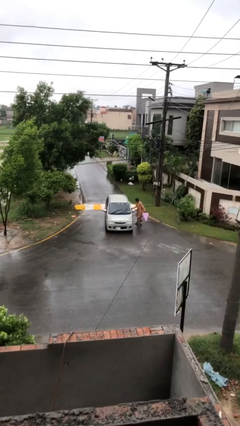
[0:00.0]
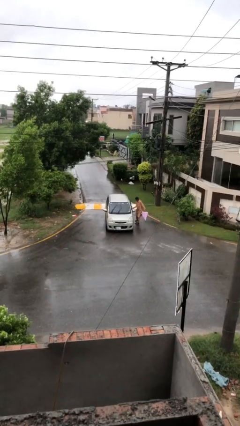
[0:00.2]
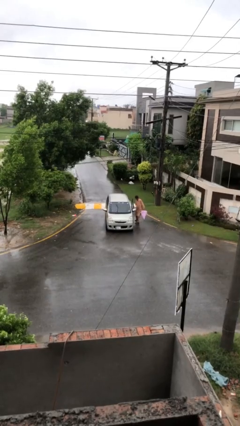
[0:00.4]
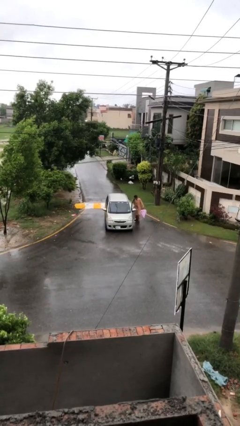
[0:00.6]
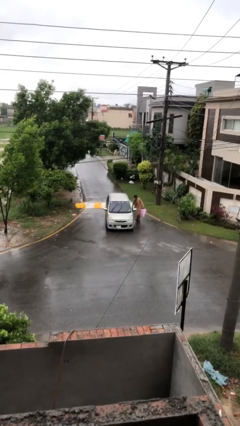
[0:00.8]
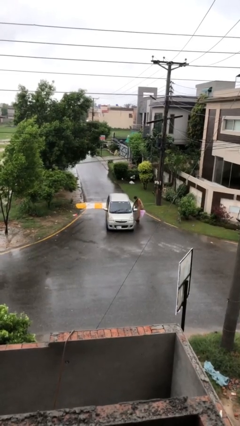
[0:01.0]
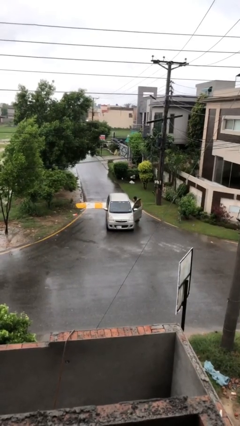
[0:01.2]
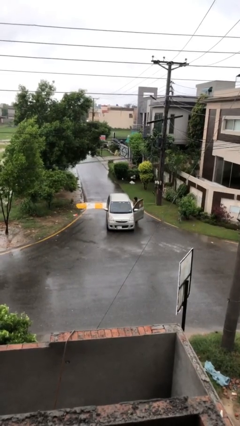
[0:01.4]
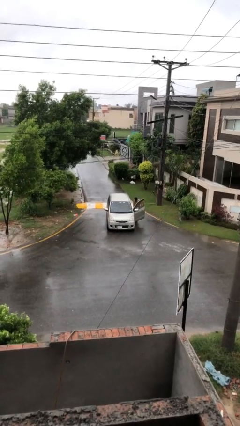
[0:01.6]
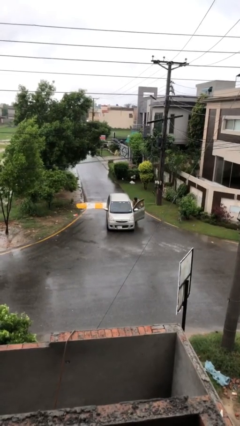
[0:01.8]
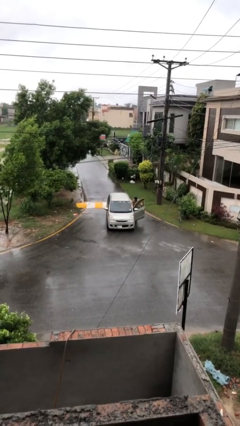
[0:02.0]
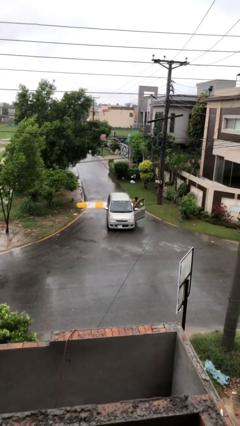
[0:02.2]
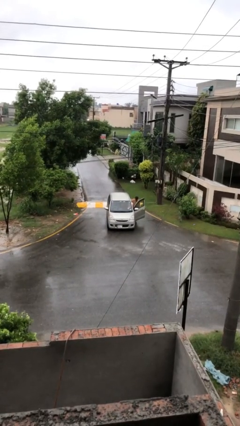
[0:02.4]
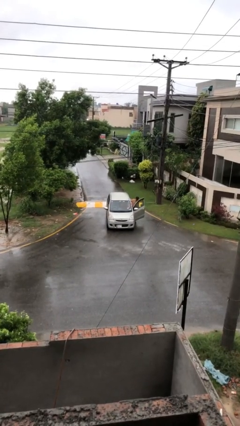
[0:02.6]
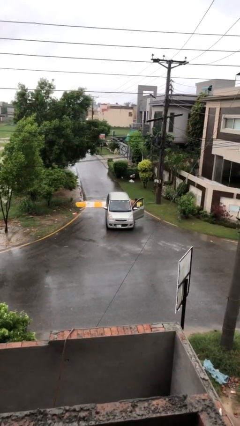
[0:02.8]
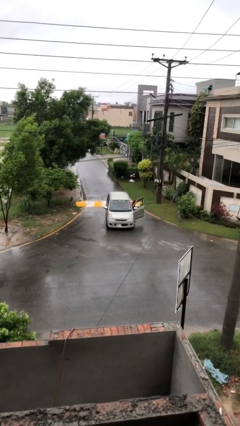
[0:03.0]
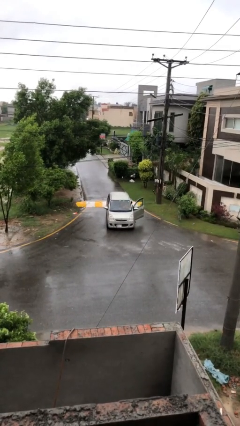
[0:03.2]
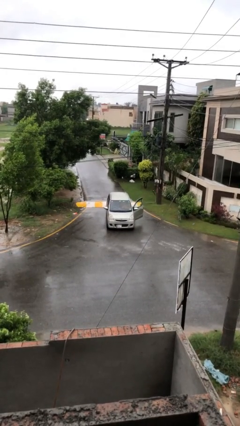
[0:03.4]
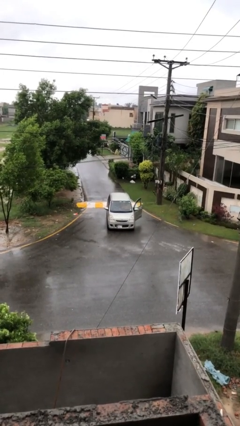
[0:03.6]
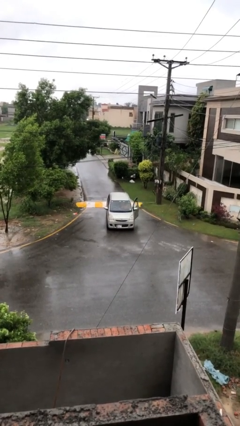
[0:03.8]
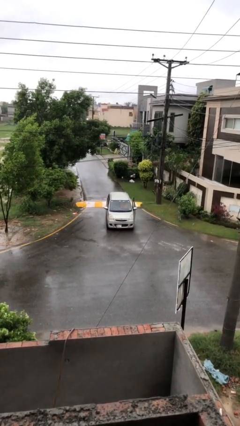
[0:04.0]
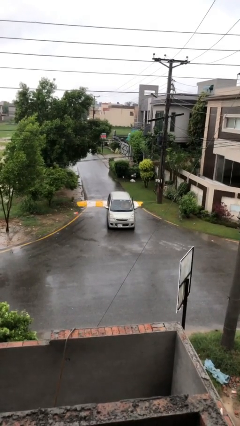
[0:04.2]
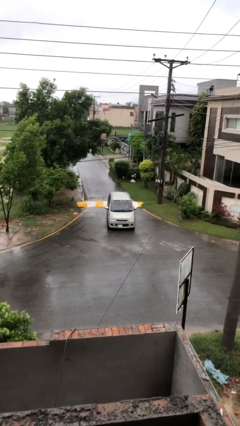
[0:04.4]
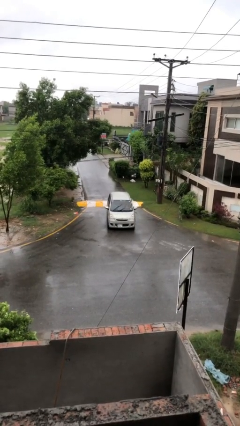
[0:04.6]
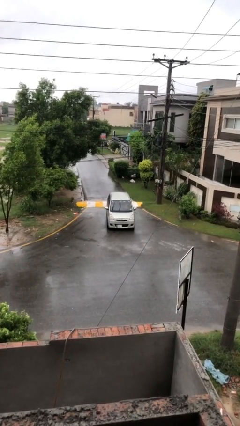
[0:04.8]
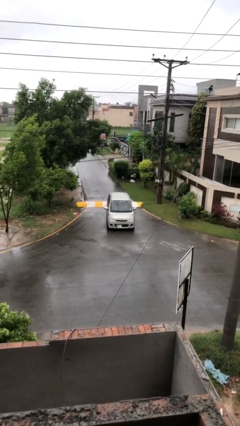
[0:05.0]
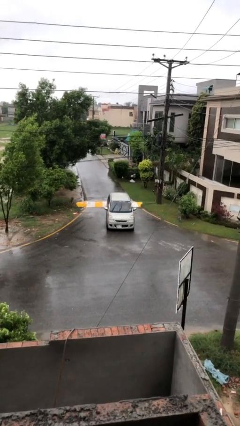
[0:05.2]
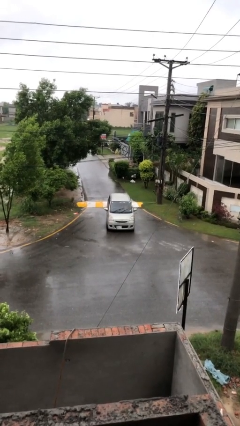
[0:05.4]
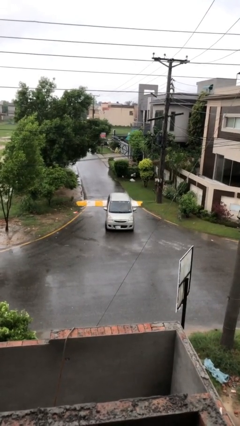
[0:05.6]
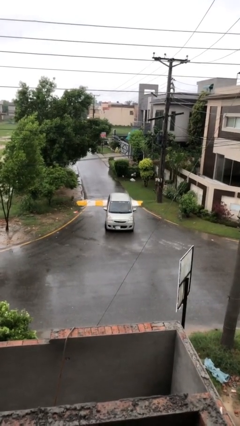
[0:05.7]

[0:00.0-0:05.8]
car picks up person

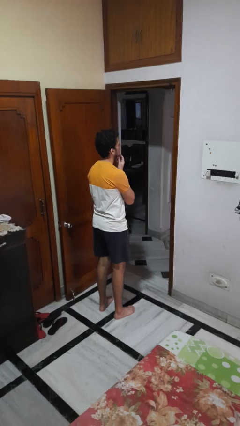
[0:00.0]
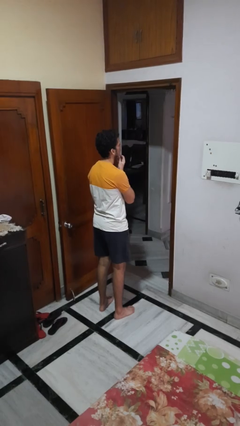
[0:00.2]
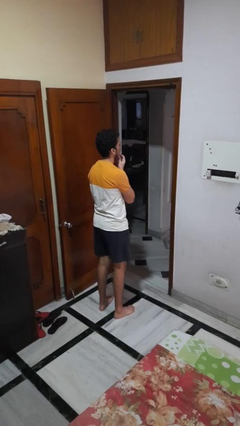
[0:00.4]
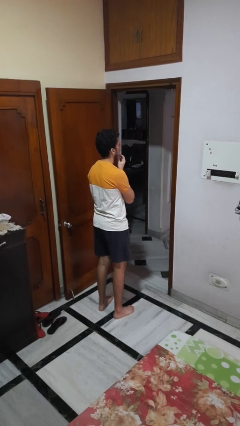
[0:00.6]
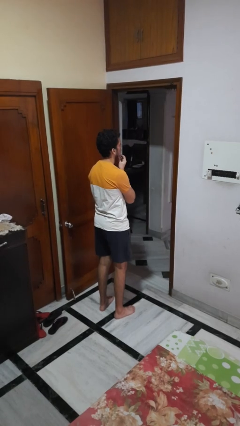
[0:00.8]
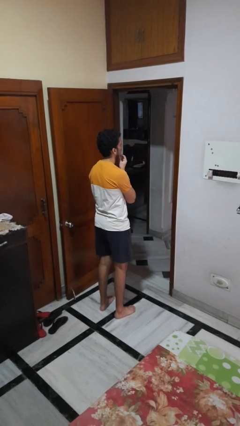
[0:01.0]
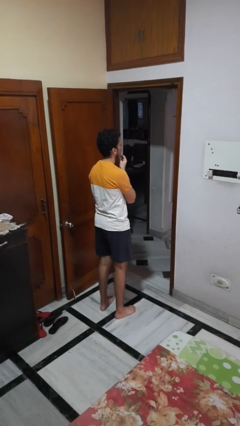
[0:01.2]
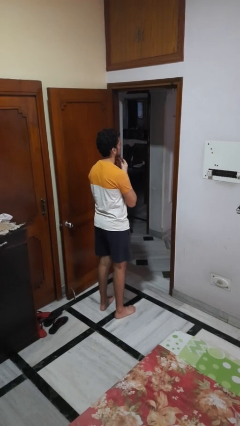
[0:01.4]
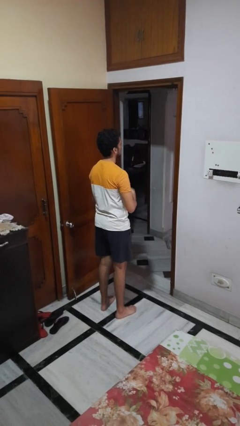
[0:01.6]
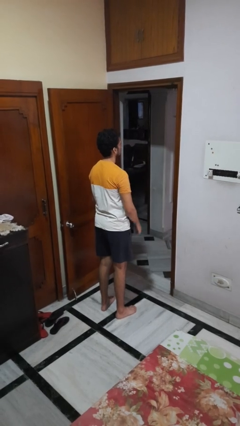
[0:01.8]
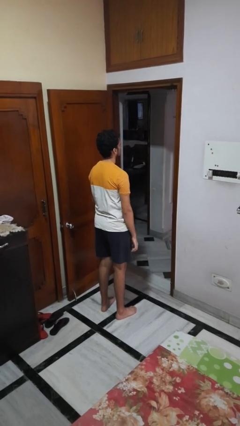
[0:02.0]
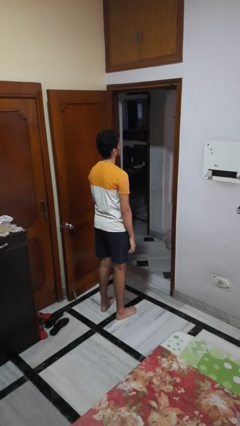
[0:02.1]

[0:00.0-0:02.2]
person strokes chin

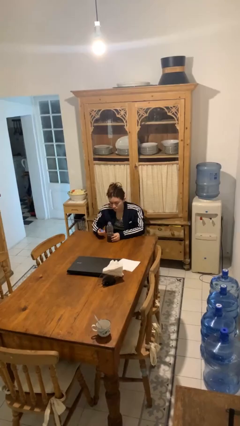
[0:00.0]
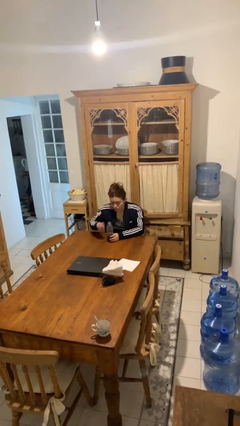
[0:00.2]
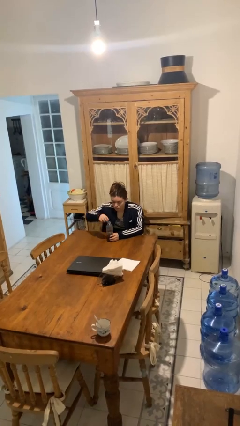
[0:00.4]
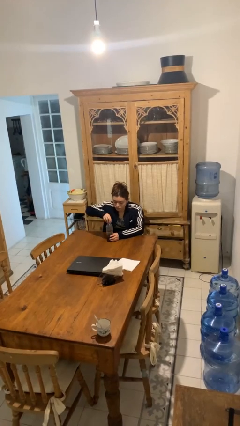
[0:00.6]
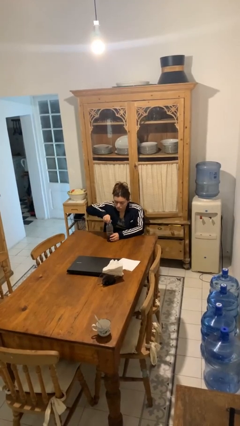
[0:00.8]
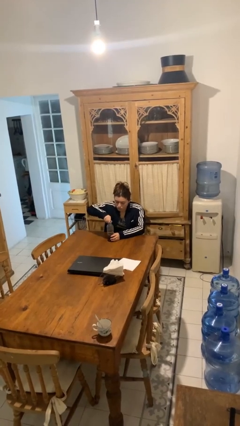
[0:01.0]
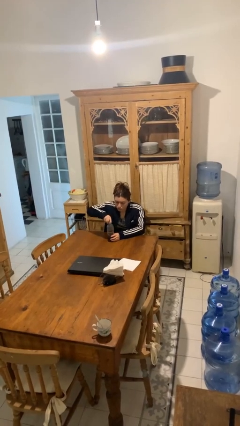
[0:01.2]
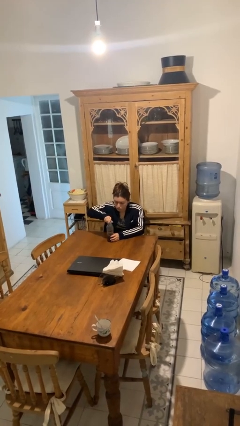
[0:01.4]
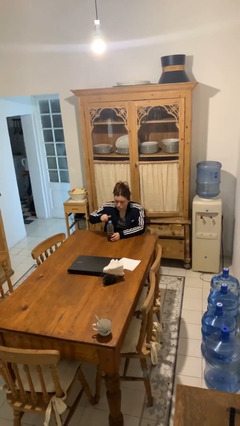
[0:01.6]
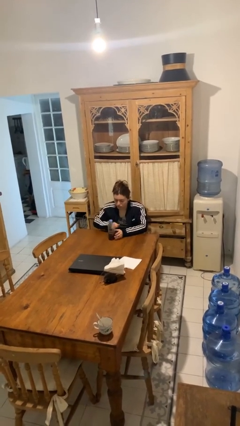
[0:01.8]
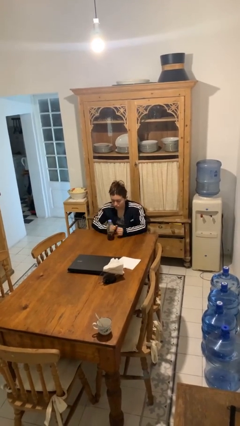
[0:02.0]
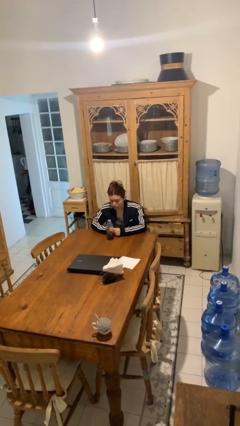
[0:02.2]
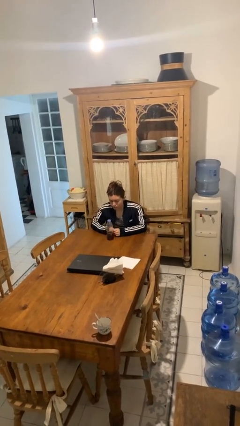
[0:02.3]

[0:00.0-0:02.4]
person screws lid to bottle

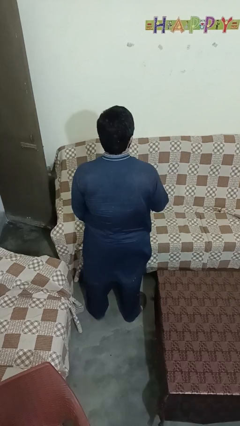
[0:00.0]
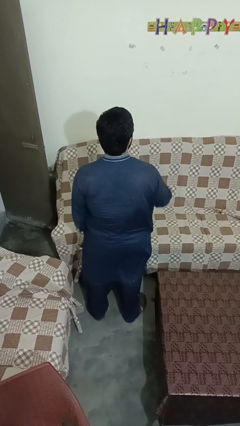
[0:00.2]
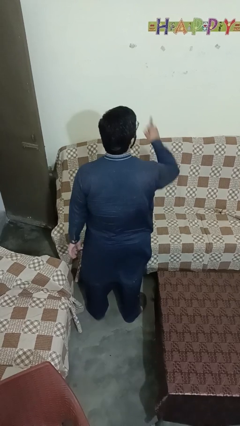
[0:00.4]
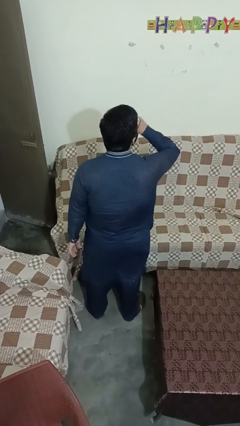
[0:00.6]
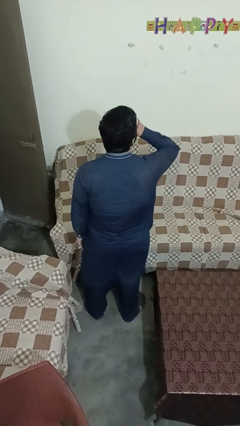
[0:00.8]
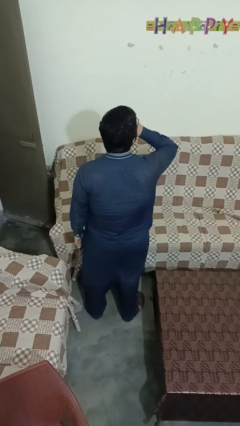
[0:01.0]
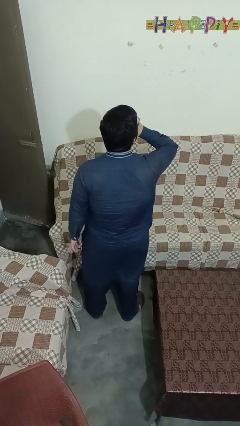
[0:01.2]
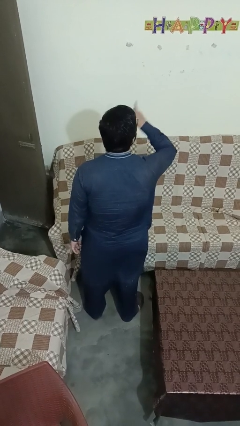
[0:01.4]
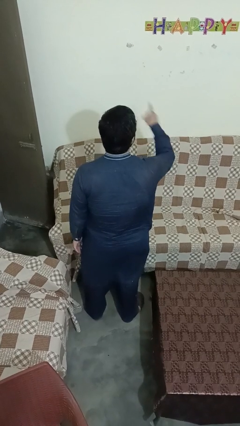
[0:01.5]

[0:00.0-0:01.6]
person gestures be quiet

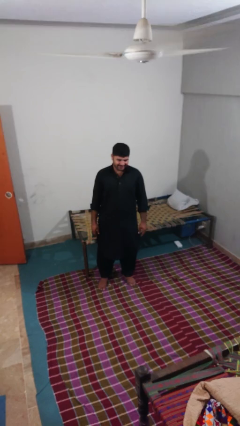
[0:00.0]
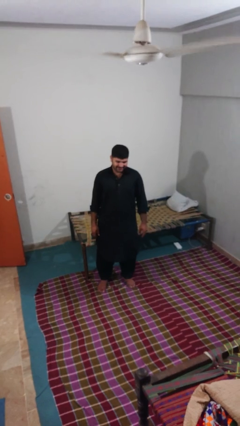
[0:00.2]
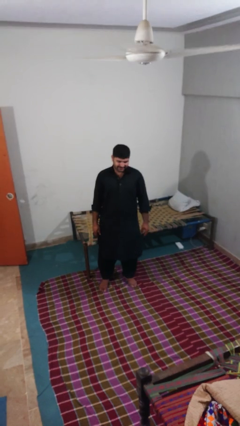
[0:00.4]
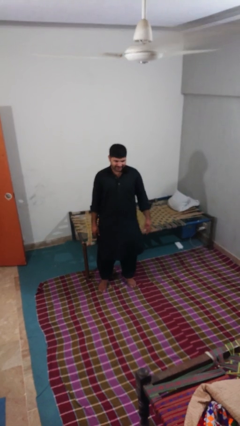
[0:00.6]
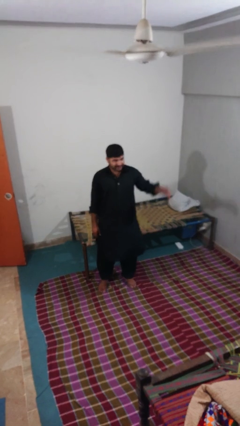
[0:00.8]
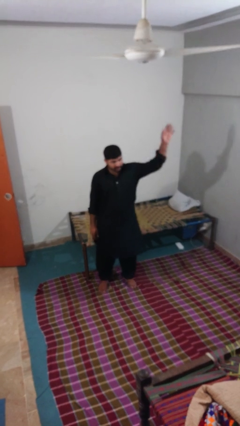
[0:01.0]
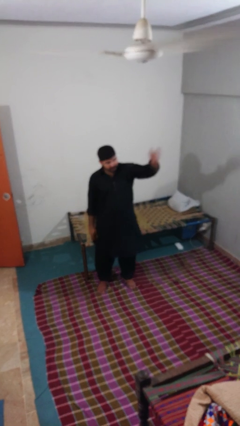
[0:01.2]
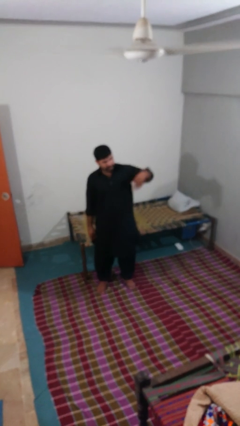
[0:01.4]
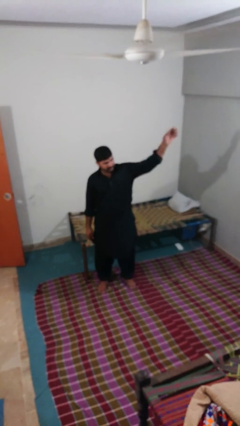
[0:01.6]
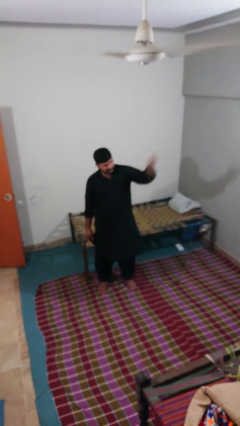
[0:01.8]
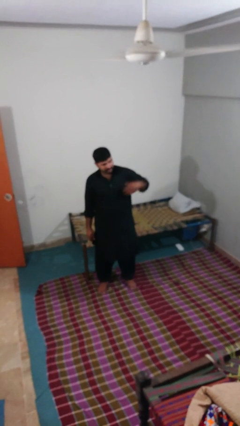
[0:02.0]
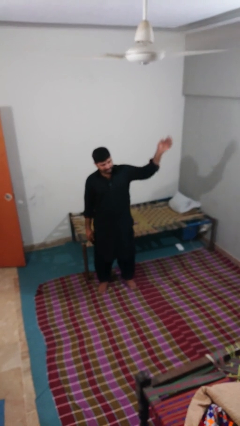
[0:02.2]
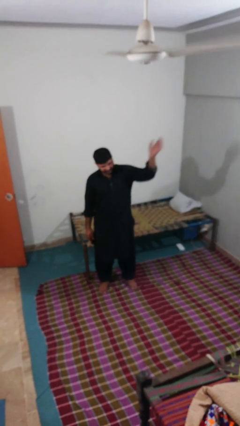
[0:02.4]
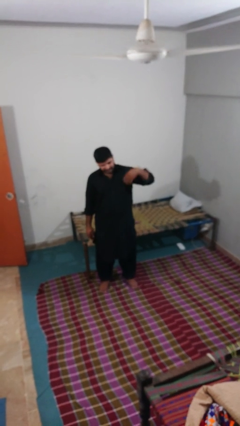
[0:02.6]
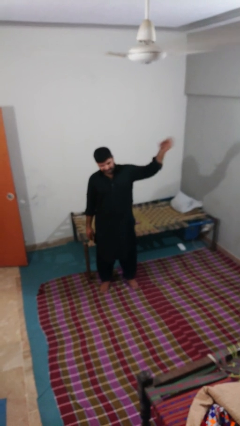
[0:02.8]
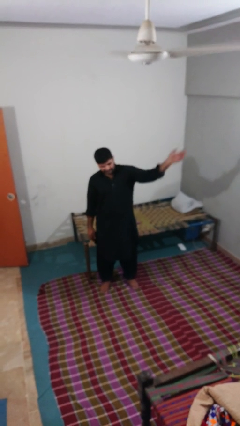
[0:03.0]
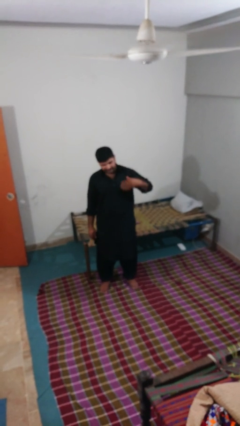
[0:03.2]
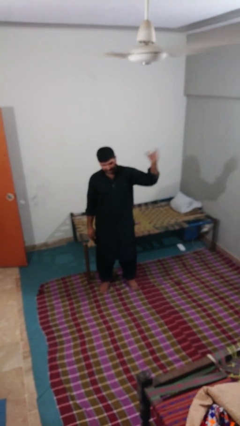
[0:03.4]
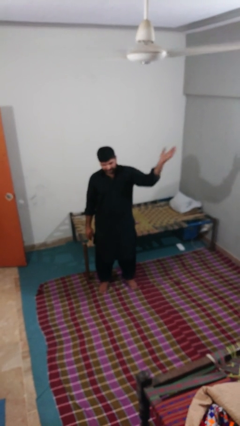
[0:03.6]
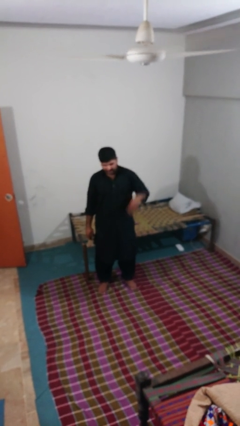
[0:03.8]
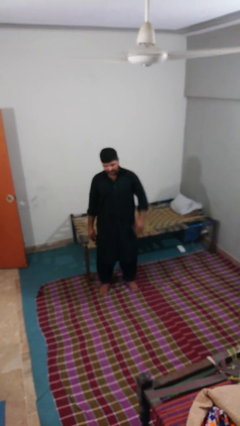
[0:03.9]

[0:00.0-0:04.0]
person gestures come here

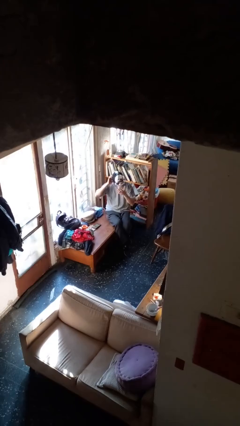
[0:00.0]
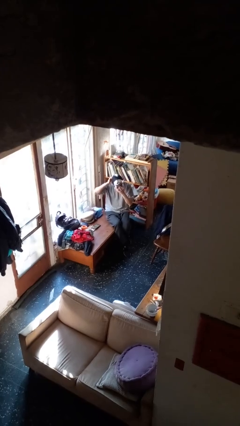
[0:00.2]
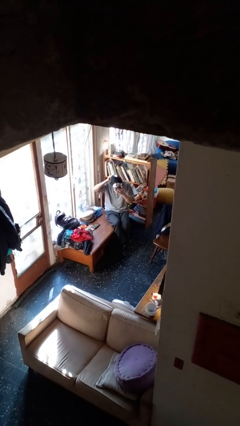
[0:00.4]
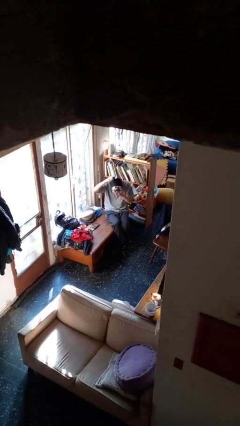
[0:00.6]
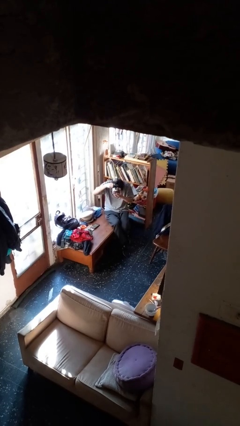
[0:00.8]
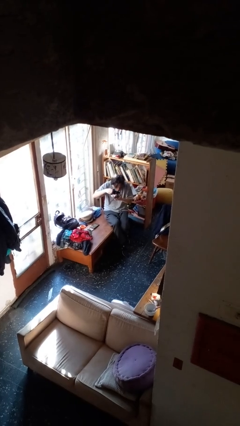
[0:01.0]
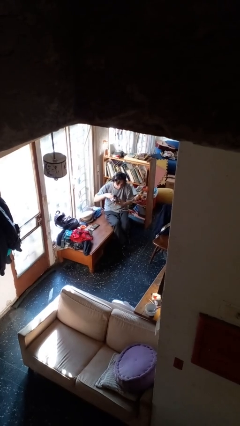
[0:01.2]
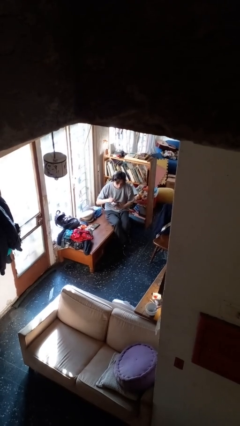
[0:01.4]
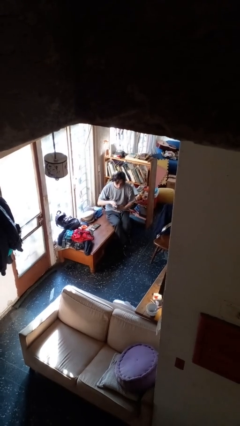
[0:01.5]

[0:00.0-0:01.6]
person takes off facemask
